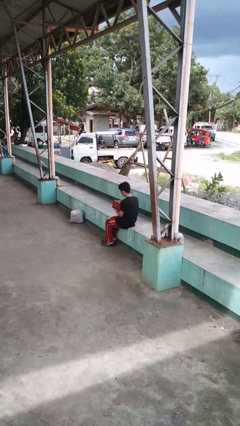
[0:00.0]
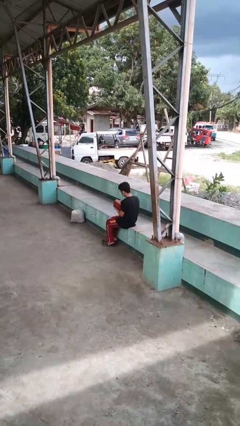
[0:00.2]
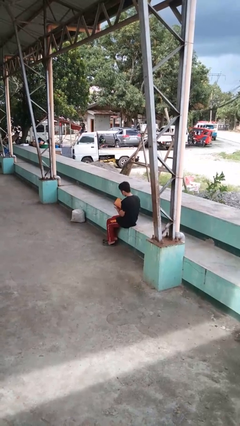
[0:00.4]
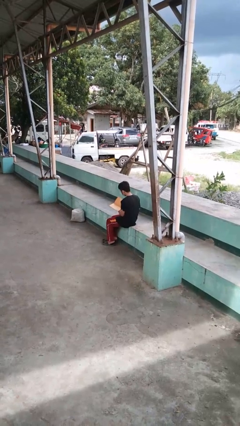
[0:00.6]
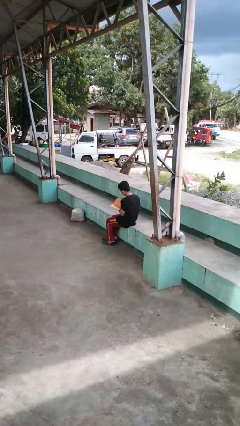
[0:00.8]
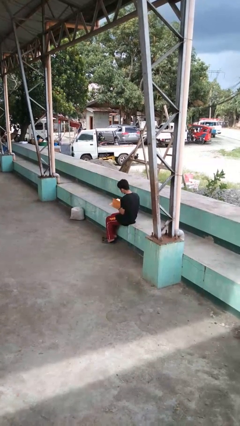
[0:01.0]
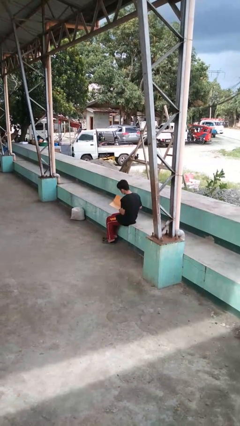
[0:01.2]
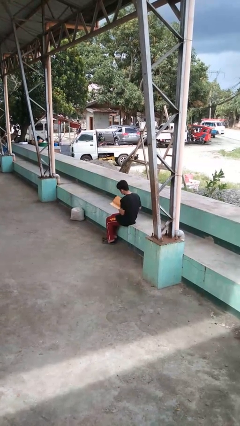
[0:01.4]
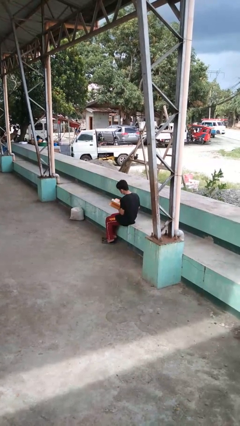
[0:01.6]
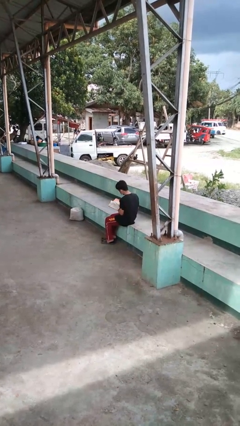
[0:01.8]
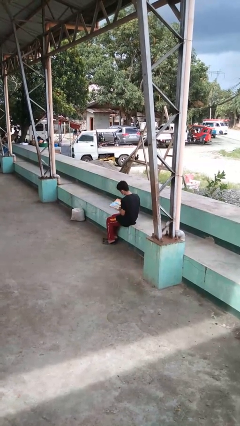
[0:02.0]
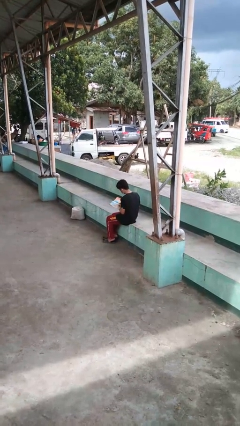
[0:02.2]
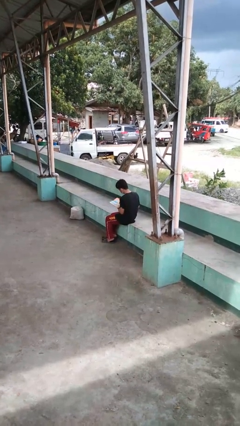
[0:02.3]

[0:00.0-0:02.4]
person reads book

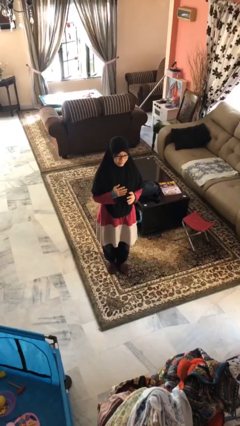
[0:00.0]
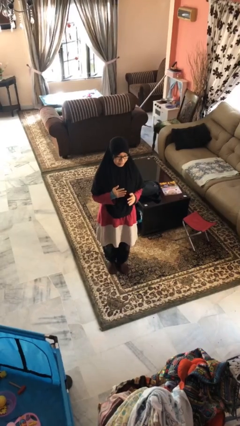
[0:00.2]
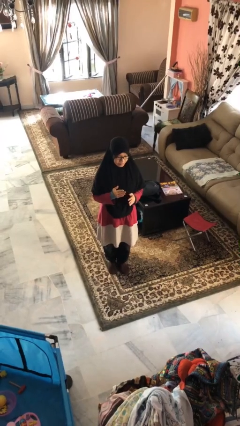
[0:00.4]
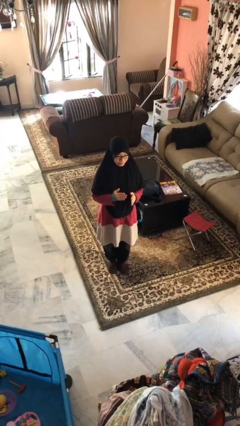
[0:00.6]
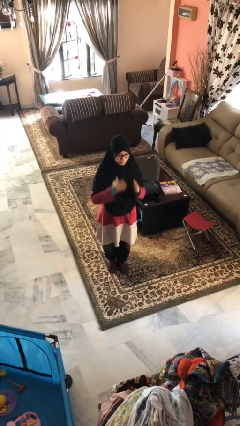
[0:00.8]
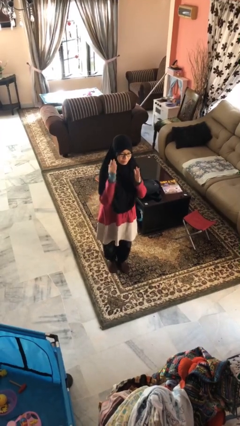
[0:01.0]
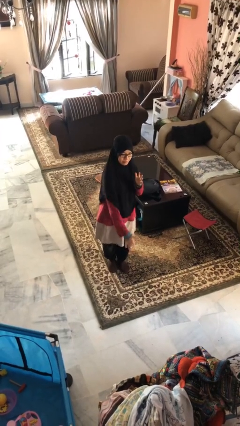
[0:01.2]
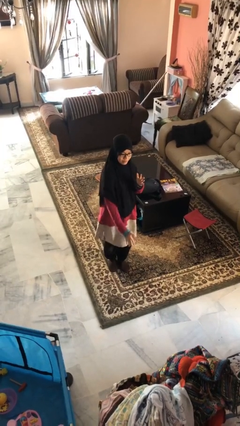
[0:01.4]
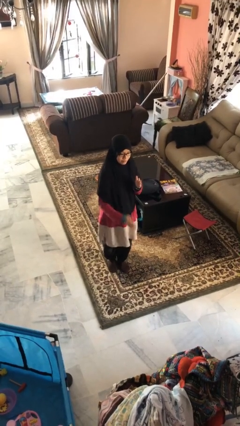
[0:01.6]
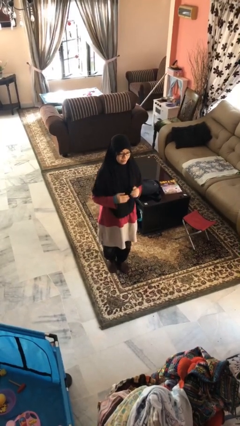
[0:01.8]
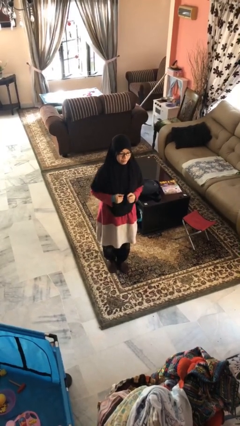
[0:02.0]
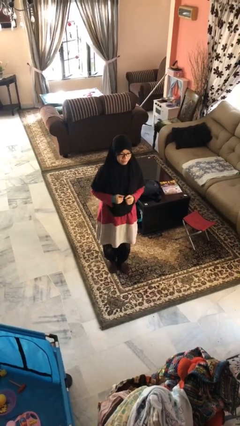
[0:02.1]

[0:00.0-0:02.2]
person karate chop

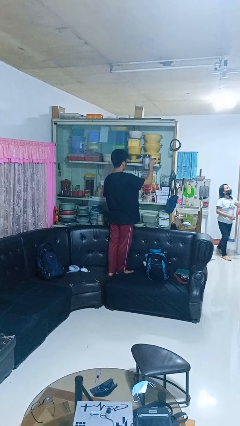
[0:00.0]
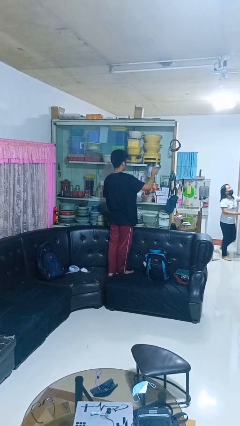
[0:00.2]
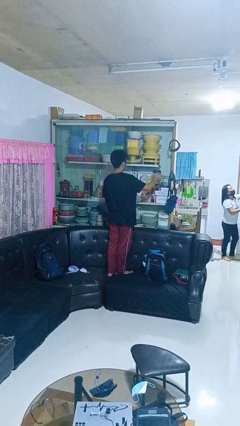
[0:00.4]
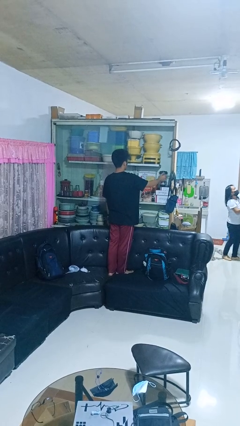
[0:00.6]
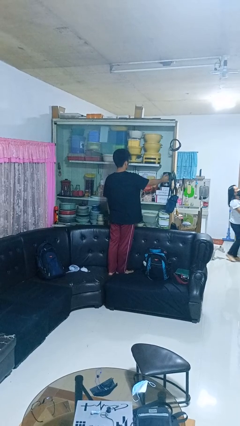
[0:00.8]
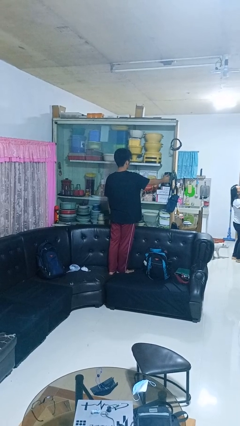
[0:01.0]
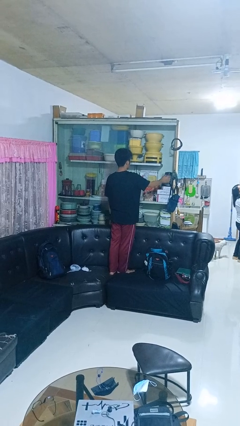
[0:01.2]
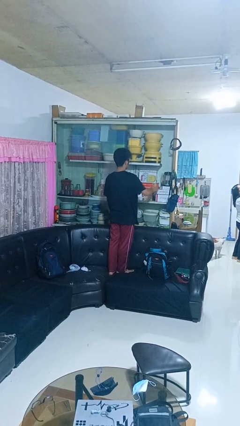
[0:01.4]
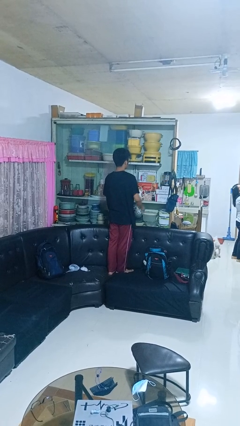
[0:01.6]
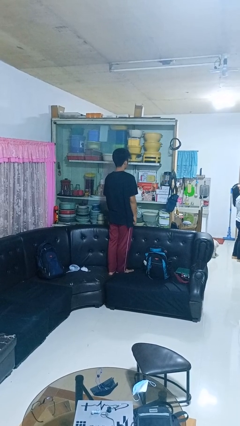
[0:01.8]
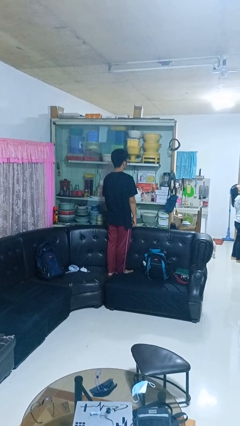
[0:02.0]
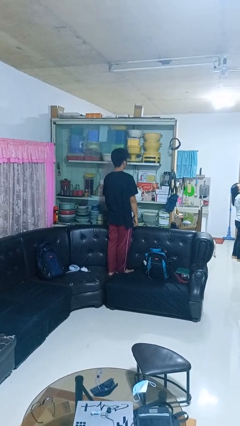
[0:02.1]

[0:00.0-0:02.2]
person puts down object into cabinet

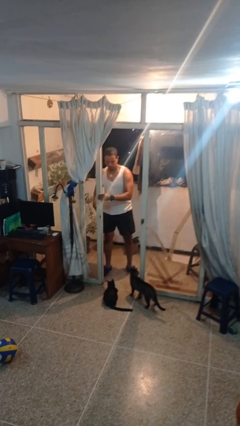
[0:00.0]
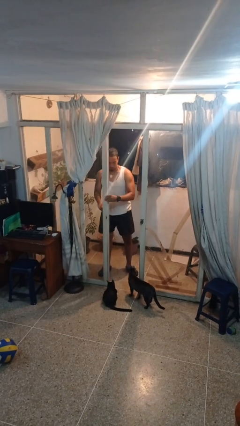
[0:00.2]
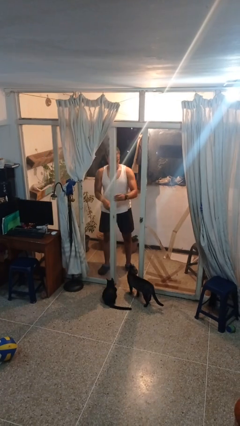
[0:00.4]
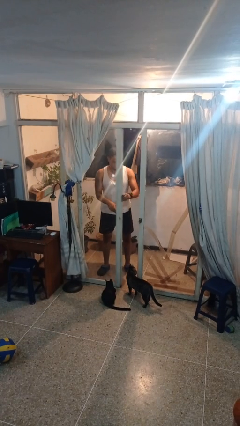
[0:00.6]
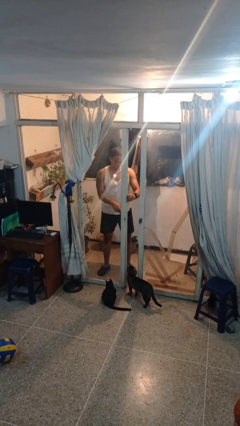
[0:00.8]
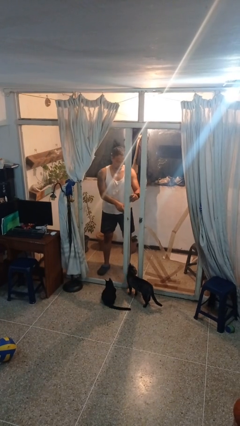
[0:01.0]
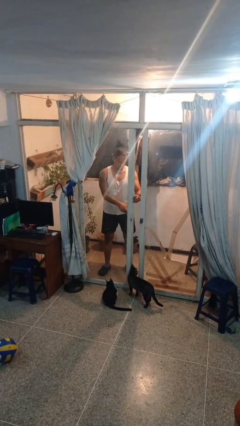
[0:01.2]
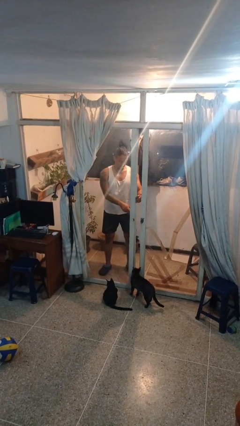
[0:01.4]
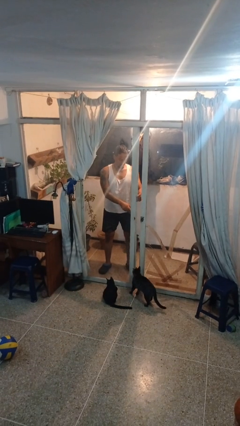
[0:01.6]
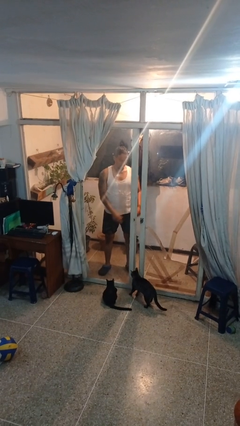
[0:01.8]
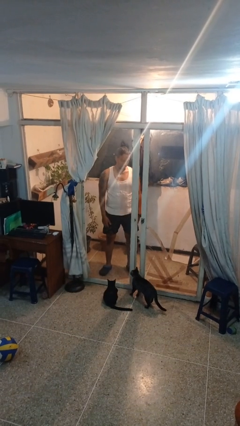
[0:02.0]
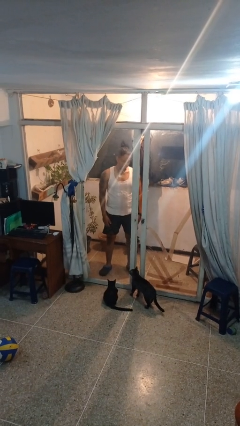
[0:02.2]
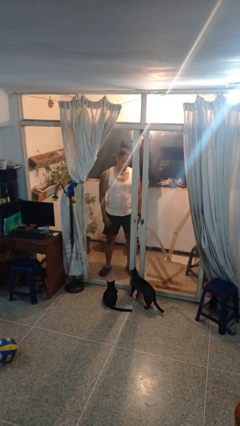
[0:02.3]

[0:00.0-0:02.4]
person closes sliding door

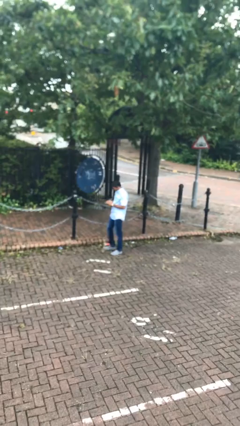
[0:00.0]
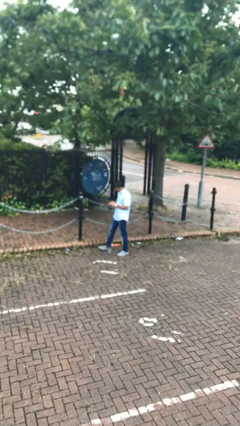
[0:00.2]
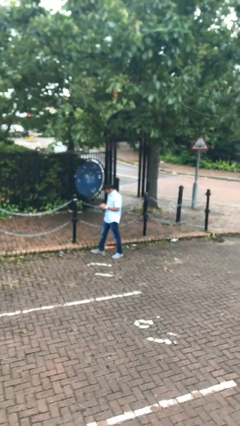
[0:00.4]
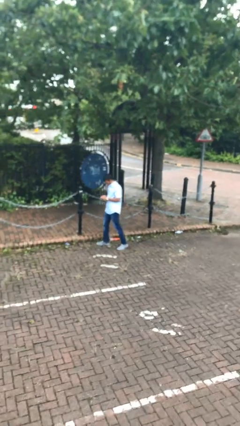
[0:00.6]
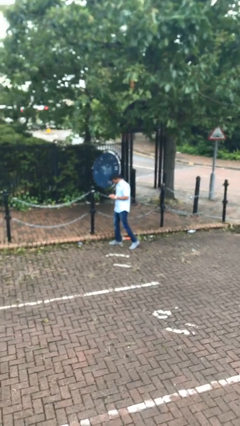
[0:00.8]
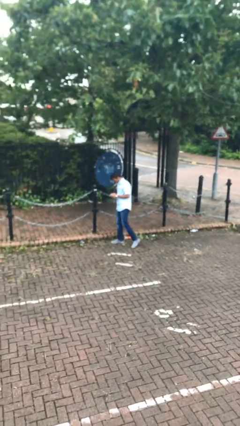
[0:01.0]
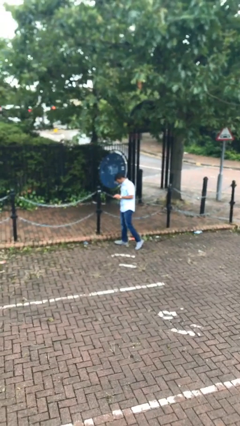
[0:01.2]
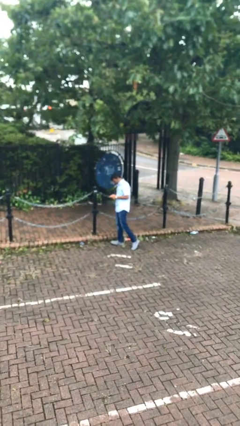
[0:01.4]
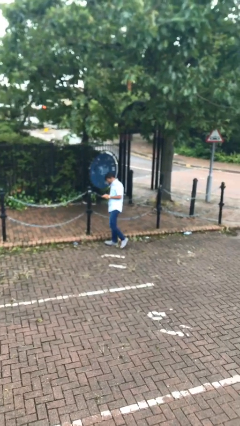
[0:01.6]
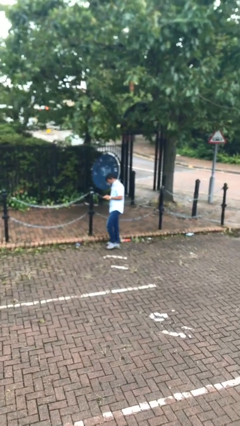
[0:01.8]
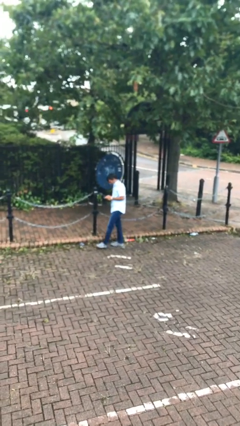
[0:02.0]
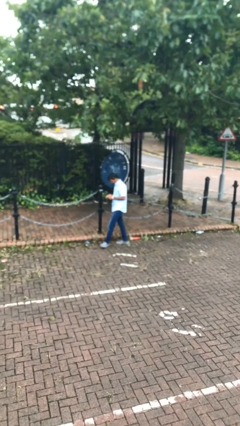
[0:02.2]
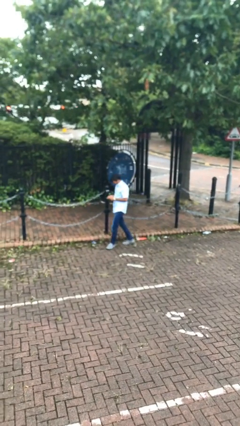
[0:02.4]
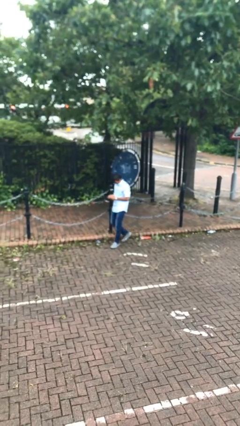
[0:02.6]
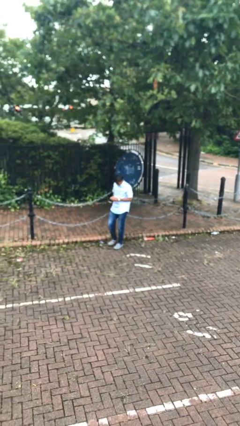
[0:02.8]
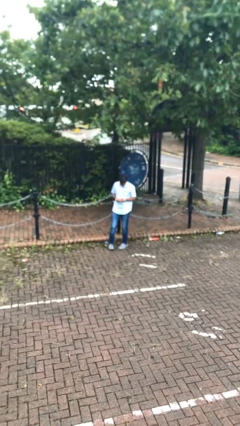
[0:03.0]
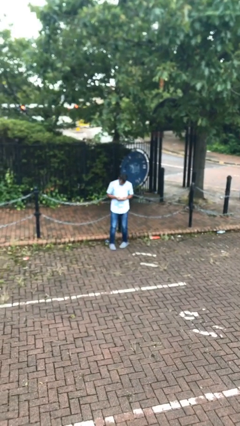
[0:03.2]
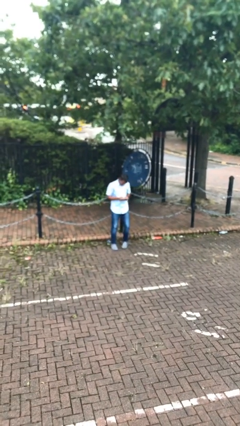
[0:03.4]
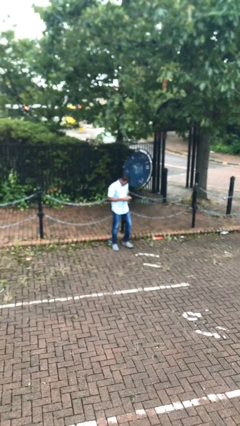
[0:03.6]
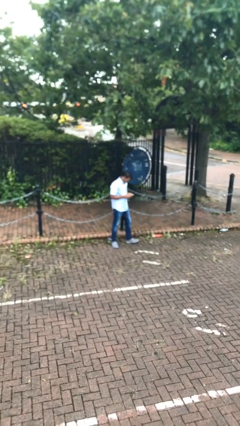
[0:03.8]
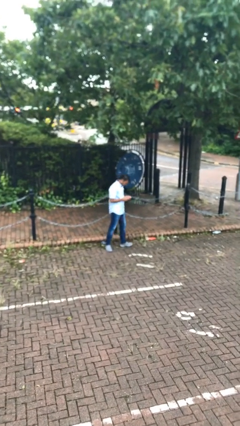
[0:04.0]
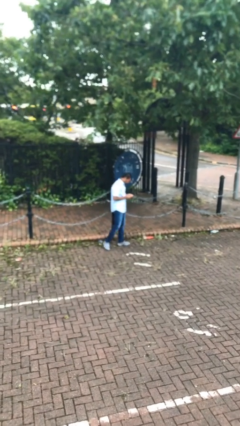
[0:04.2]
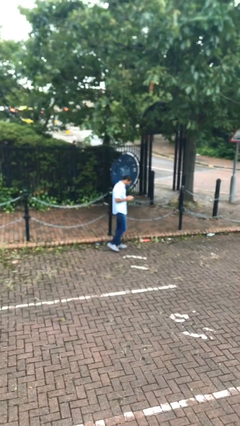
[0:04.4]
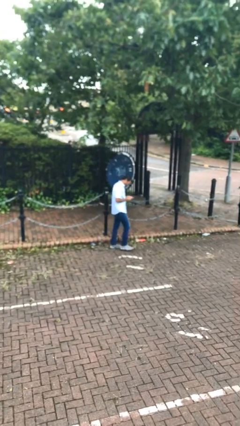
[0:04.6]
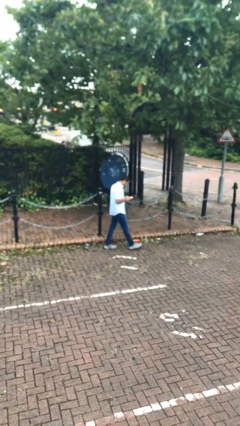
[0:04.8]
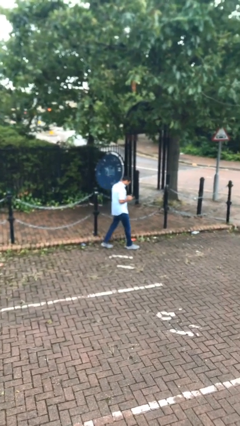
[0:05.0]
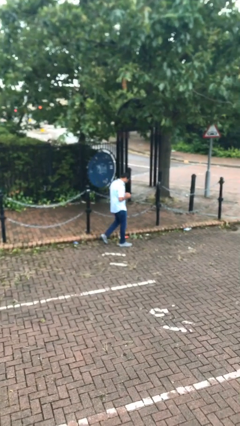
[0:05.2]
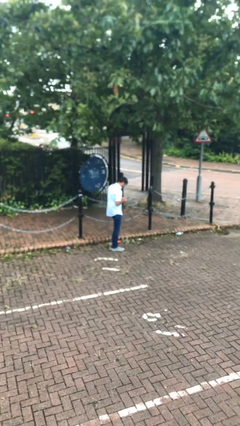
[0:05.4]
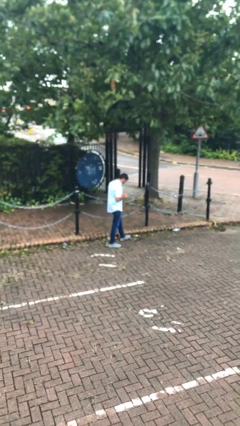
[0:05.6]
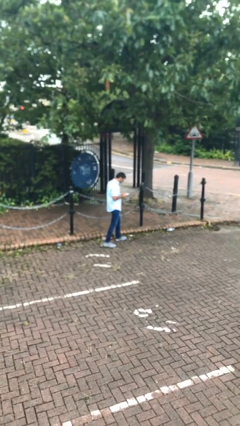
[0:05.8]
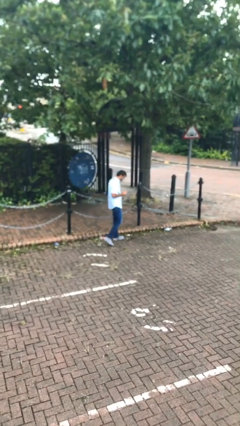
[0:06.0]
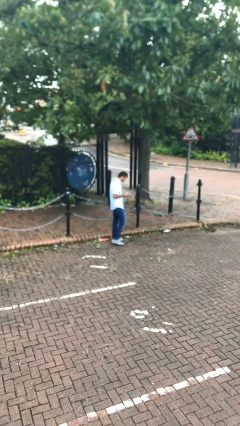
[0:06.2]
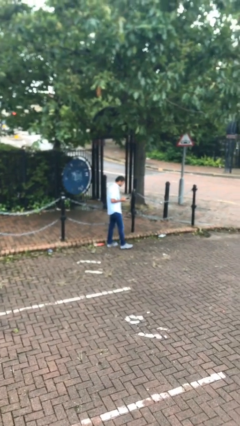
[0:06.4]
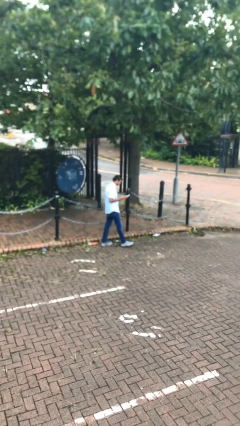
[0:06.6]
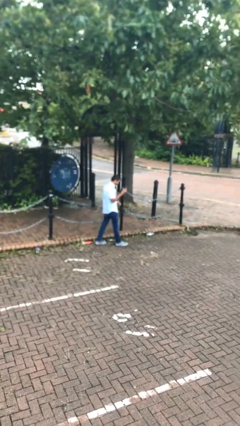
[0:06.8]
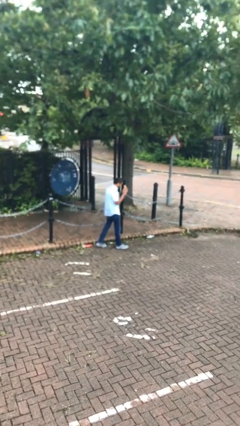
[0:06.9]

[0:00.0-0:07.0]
person texts on phone

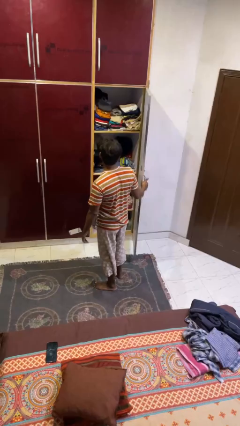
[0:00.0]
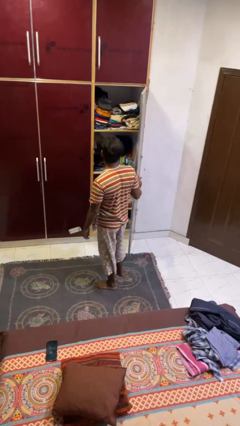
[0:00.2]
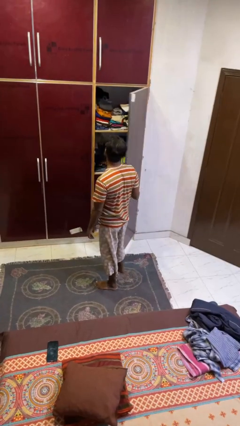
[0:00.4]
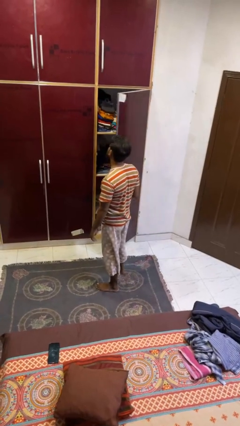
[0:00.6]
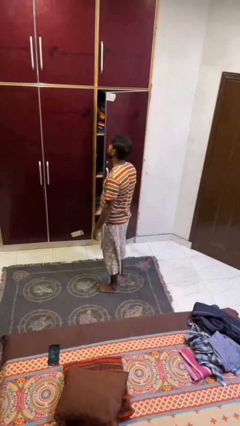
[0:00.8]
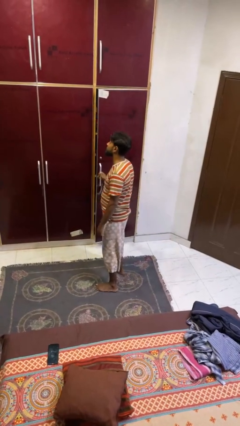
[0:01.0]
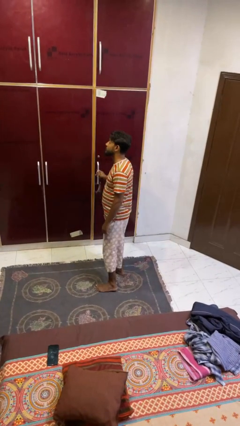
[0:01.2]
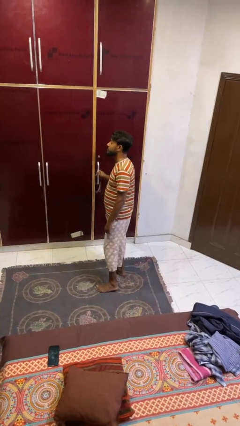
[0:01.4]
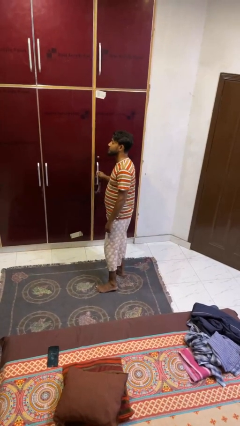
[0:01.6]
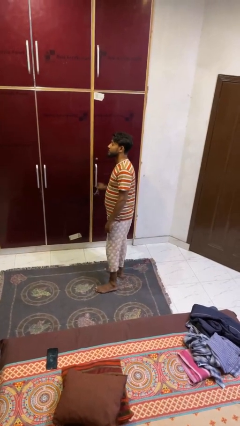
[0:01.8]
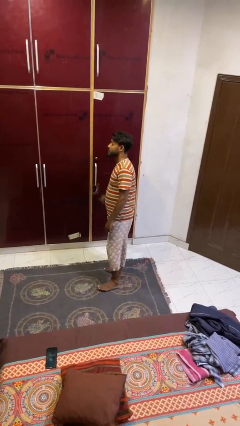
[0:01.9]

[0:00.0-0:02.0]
person closes closet door
